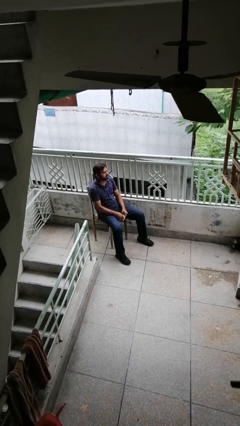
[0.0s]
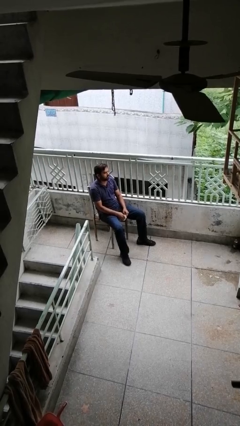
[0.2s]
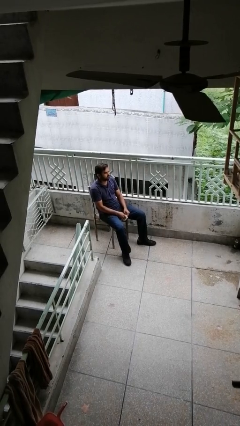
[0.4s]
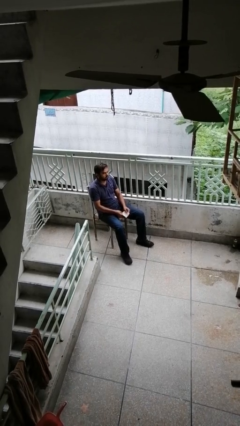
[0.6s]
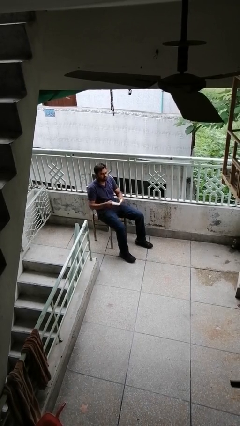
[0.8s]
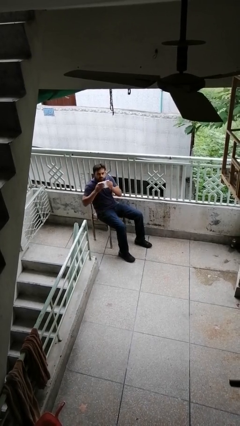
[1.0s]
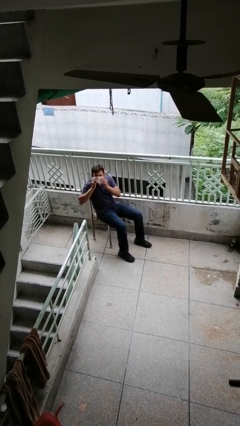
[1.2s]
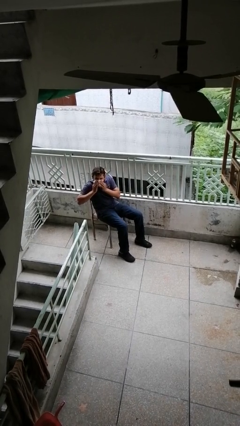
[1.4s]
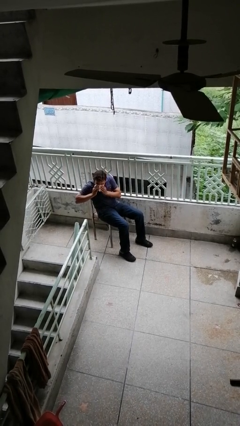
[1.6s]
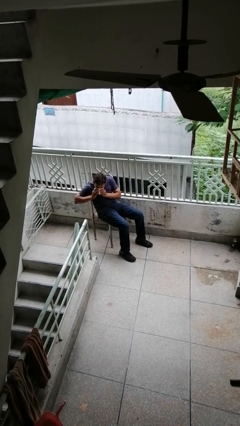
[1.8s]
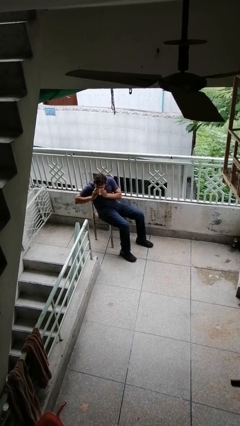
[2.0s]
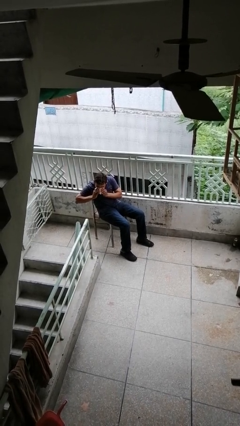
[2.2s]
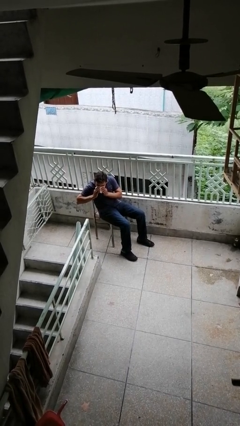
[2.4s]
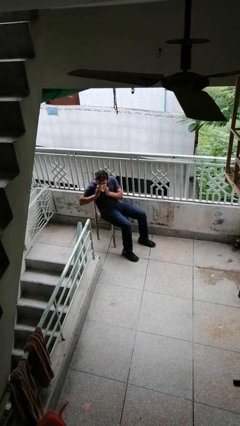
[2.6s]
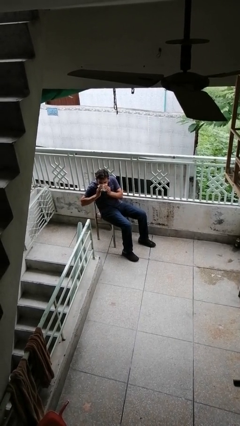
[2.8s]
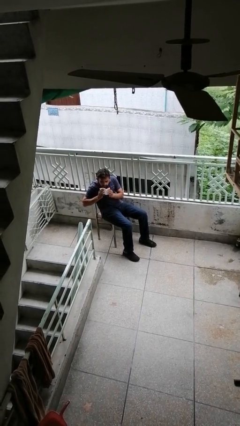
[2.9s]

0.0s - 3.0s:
person blows nose

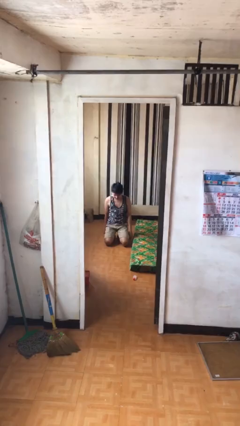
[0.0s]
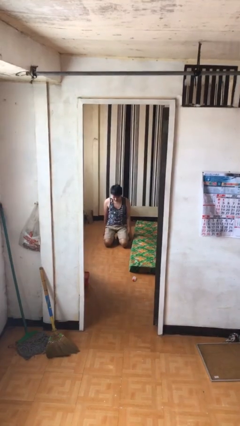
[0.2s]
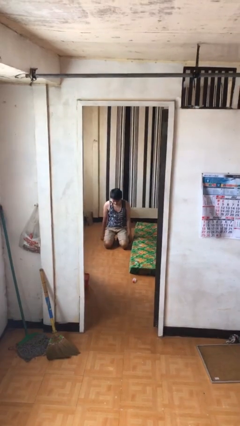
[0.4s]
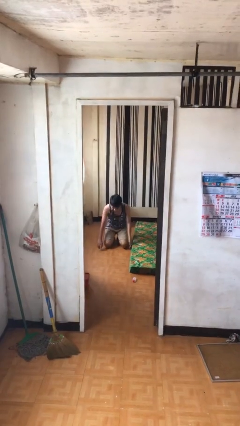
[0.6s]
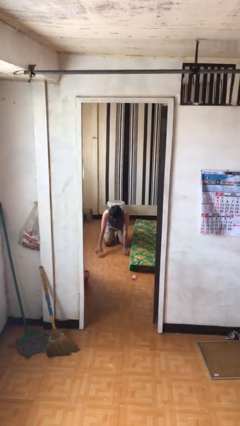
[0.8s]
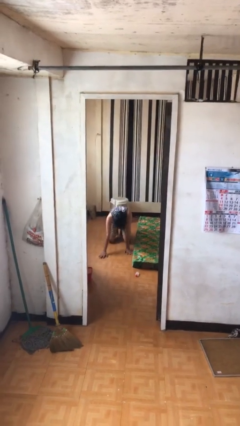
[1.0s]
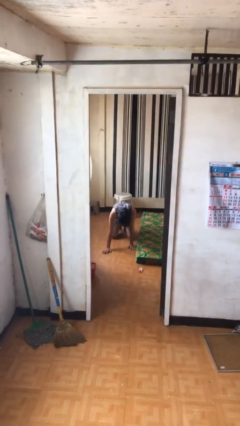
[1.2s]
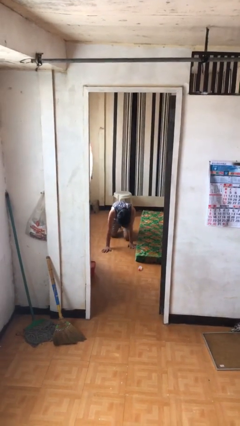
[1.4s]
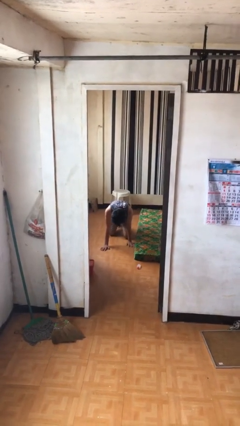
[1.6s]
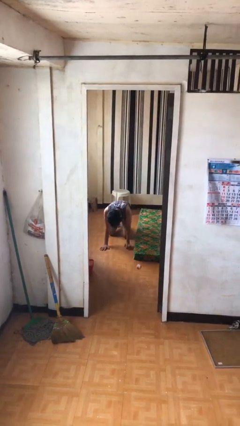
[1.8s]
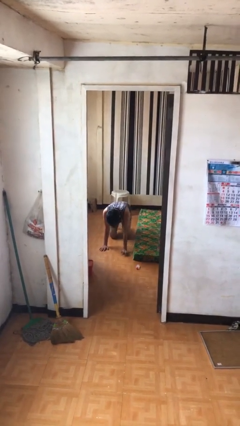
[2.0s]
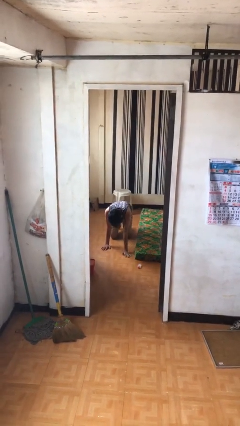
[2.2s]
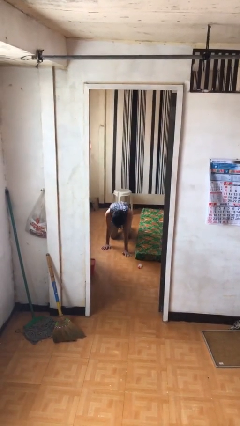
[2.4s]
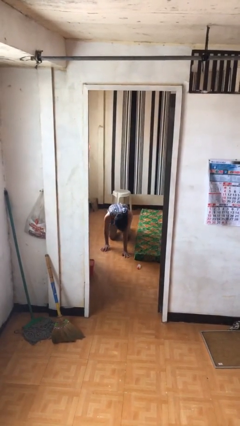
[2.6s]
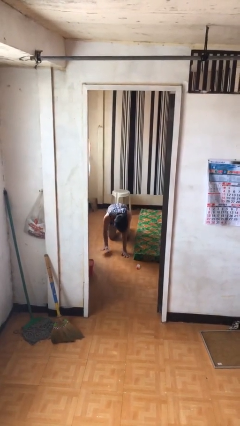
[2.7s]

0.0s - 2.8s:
person crawls

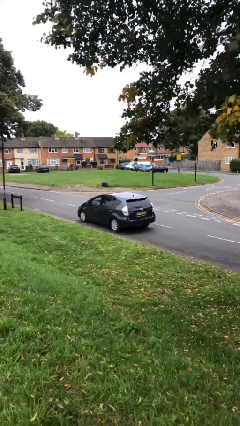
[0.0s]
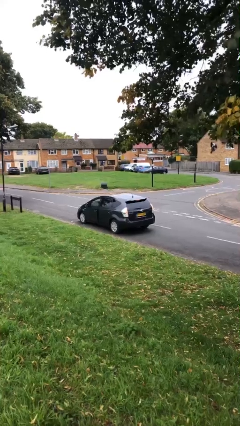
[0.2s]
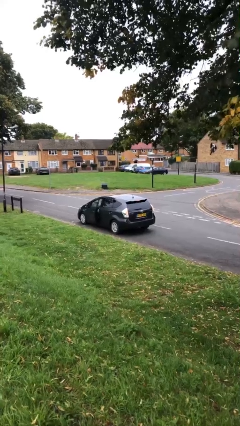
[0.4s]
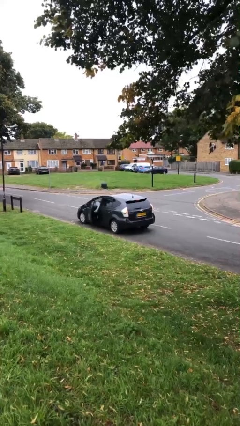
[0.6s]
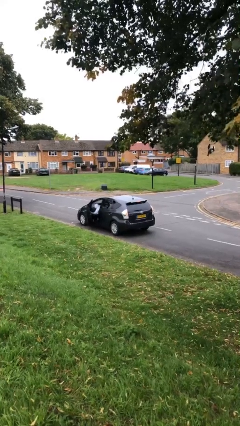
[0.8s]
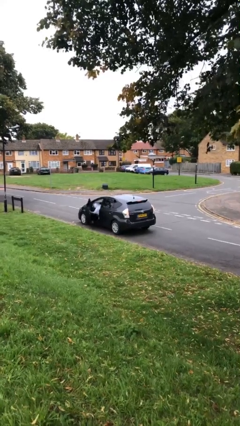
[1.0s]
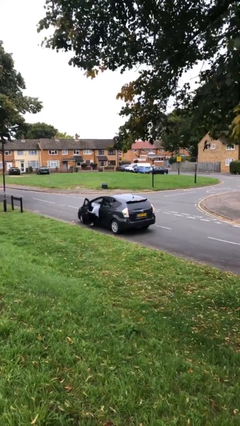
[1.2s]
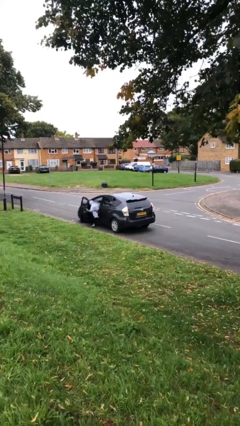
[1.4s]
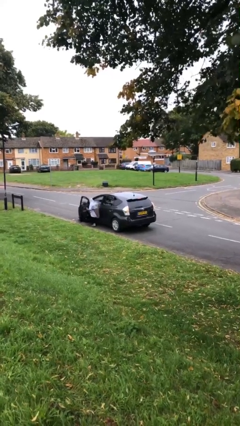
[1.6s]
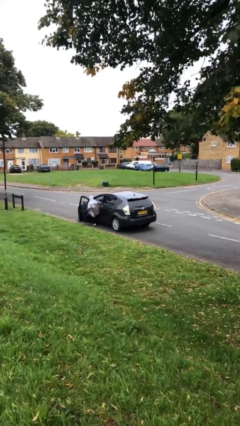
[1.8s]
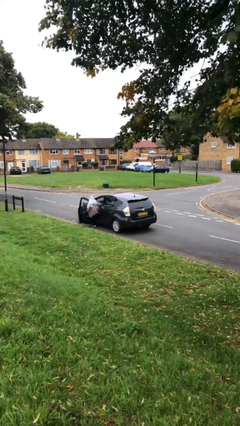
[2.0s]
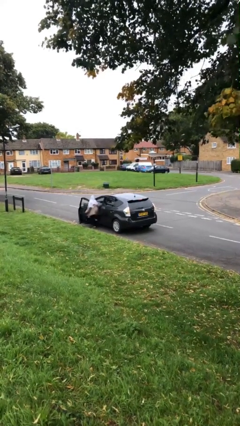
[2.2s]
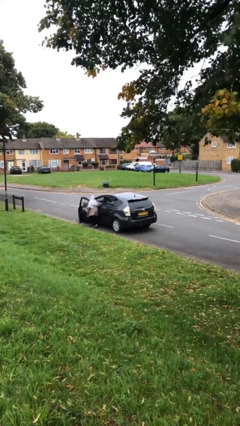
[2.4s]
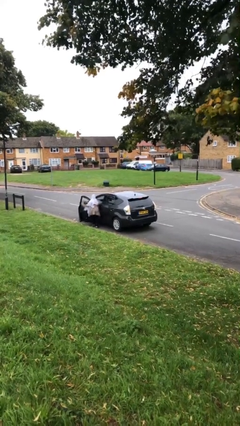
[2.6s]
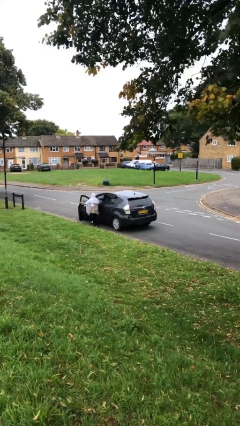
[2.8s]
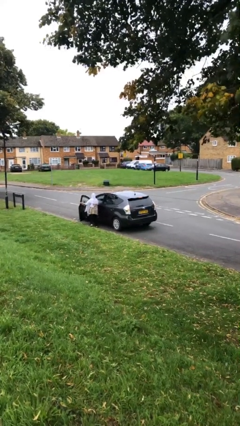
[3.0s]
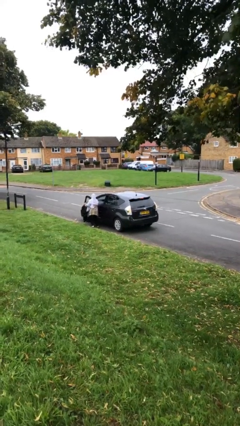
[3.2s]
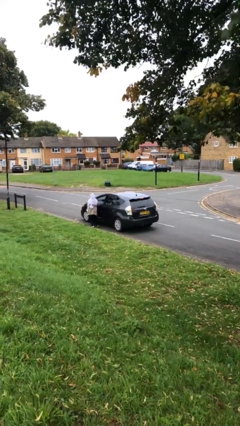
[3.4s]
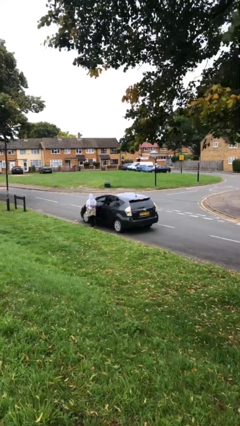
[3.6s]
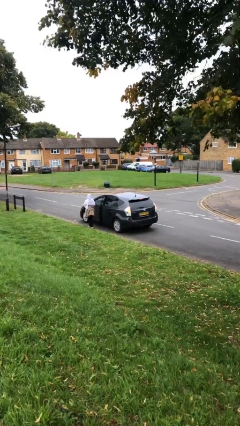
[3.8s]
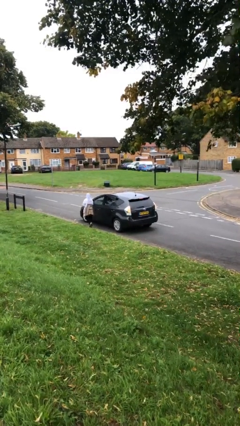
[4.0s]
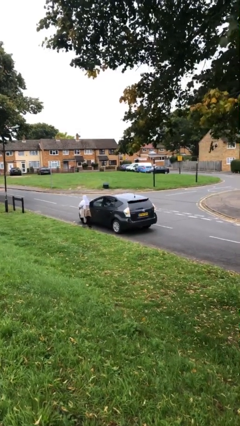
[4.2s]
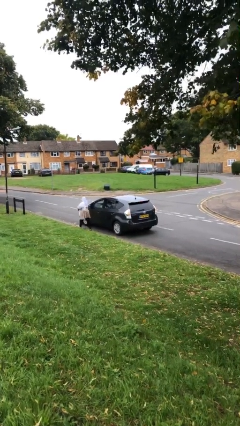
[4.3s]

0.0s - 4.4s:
car drops off person

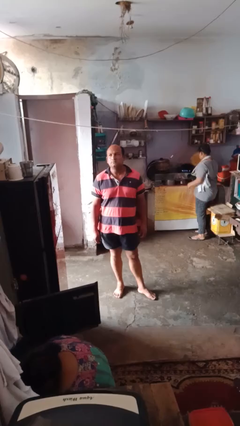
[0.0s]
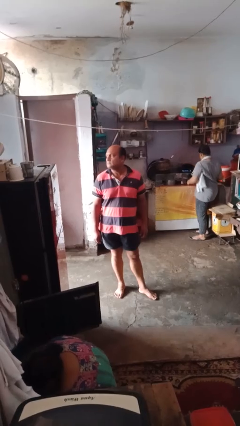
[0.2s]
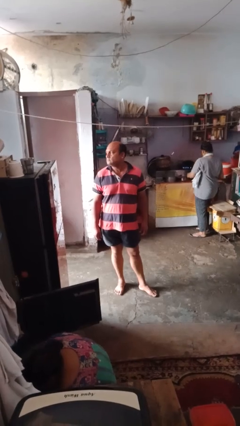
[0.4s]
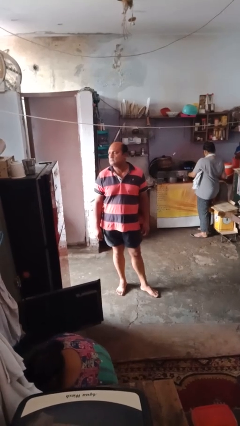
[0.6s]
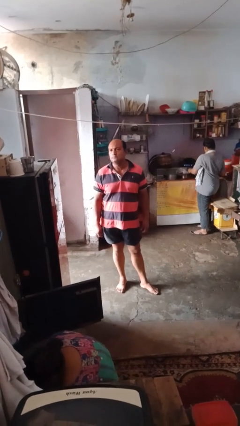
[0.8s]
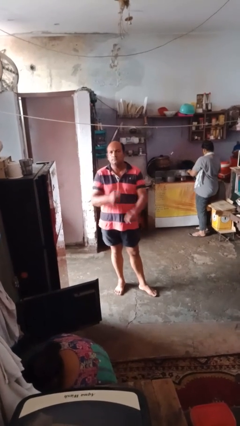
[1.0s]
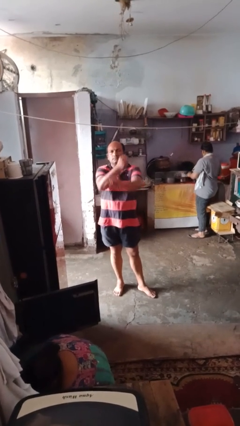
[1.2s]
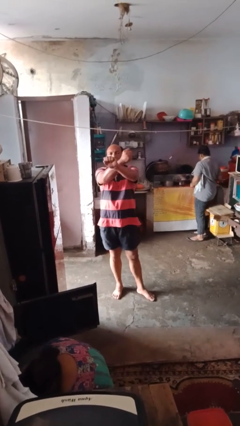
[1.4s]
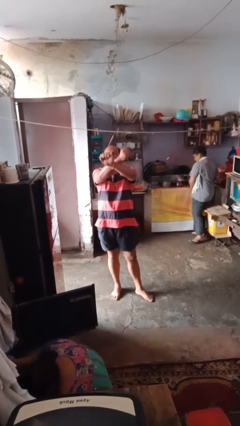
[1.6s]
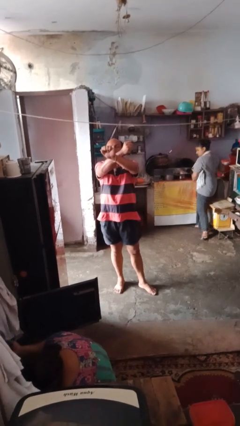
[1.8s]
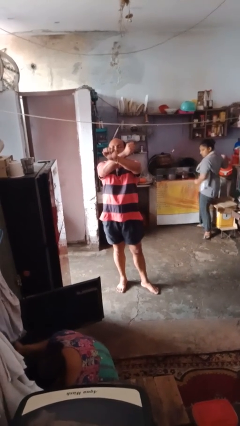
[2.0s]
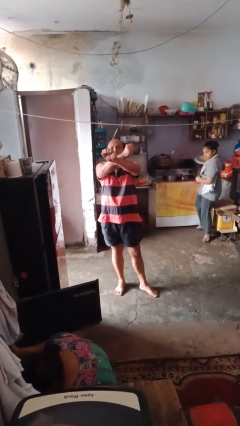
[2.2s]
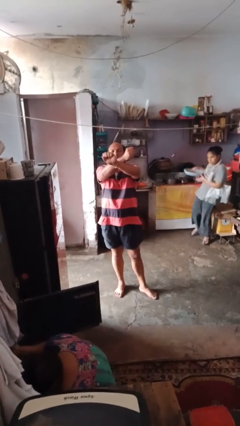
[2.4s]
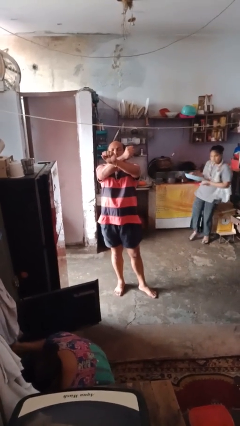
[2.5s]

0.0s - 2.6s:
person gestures arms x

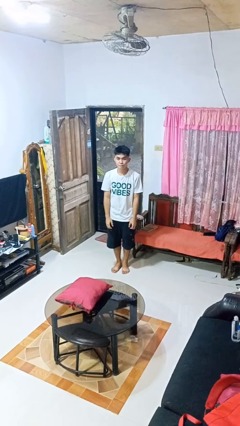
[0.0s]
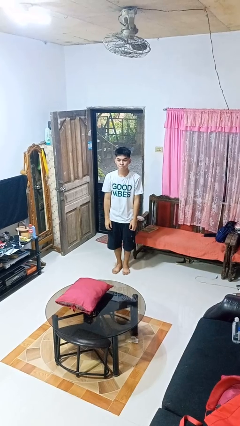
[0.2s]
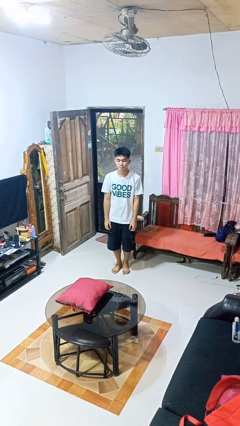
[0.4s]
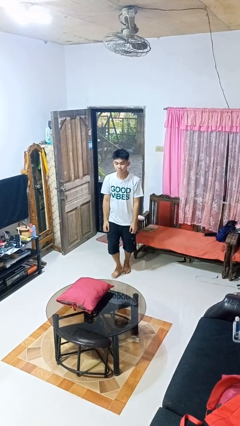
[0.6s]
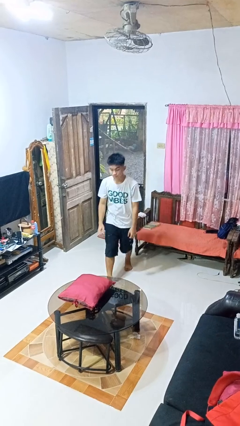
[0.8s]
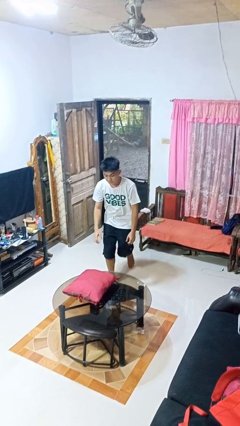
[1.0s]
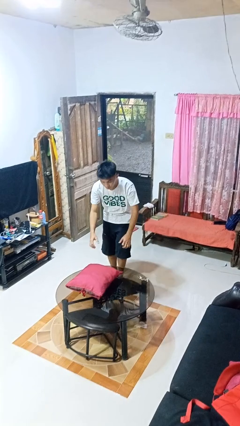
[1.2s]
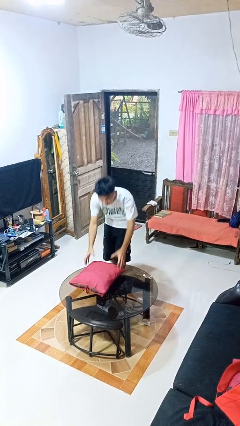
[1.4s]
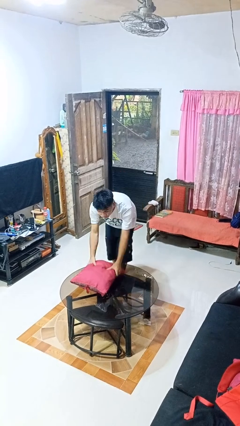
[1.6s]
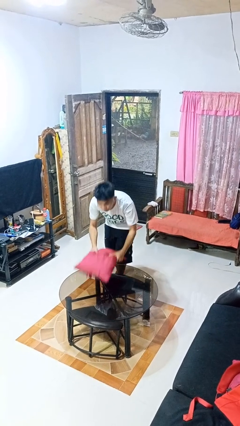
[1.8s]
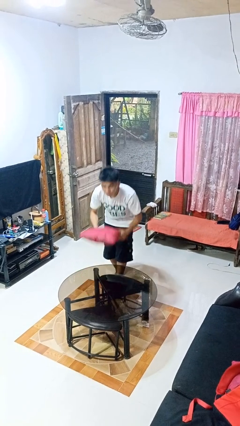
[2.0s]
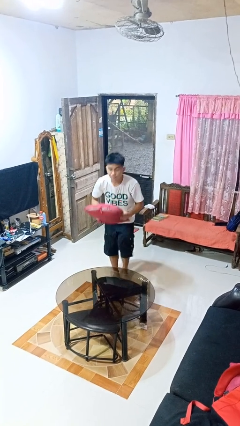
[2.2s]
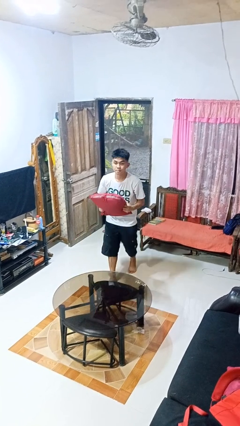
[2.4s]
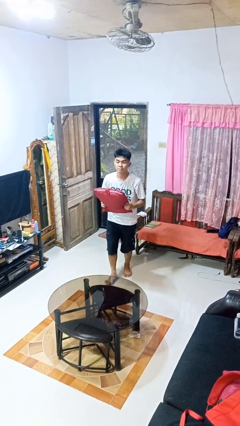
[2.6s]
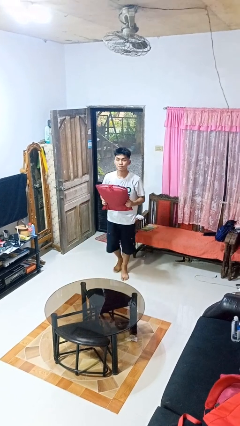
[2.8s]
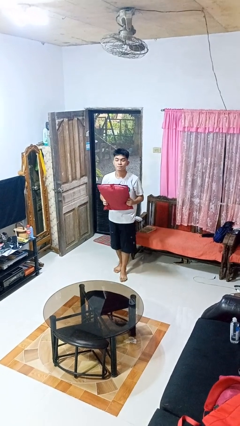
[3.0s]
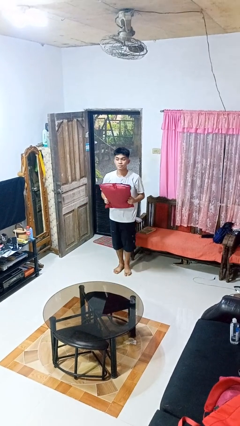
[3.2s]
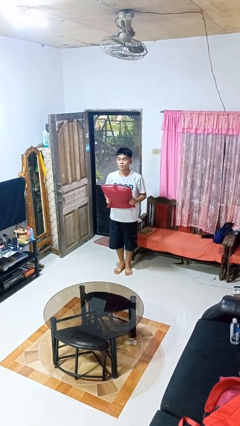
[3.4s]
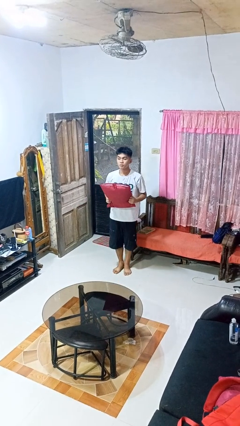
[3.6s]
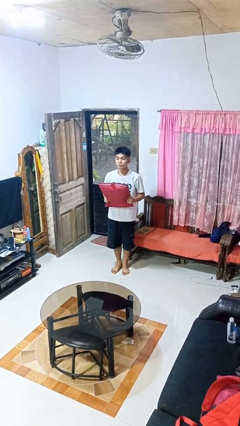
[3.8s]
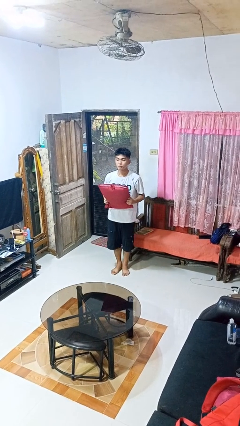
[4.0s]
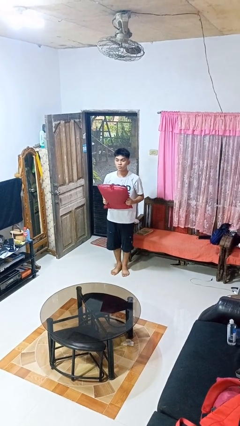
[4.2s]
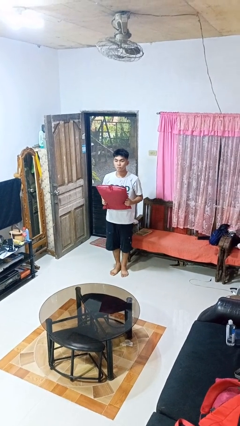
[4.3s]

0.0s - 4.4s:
person picks up object from table
